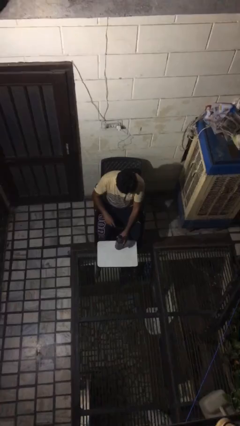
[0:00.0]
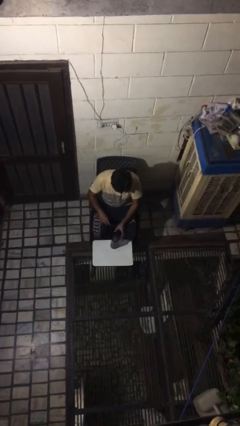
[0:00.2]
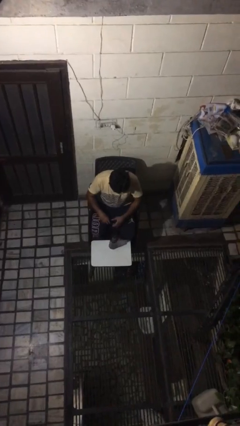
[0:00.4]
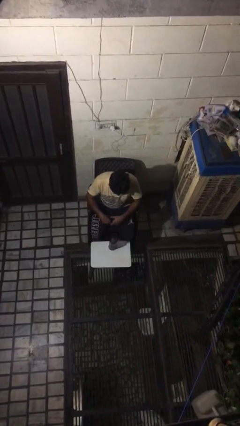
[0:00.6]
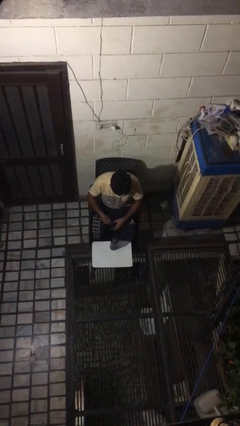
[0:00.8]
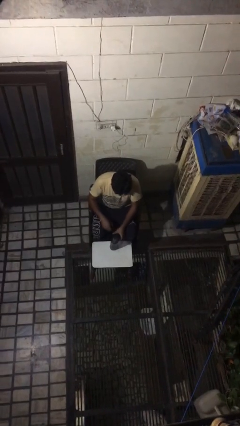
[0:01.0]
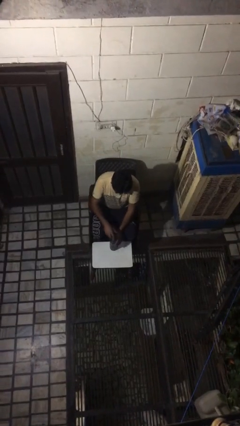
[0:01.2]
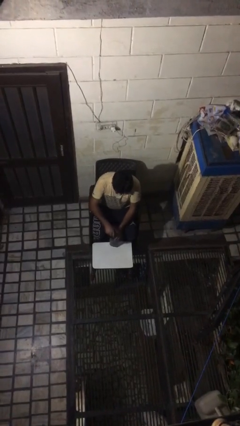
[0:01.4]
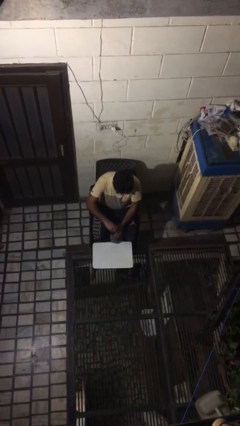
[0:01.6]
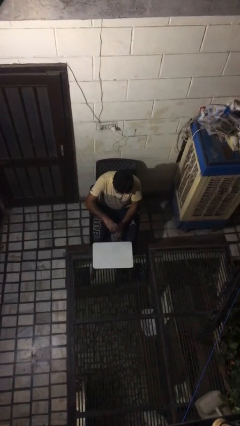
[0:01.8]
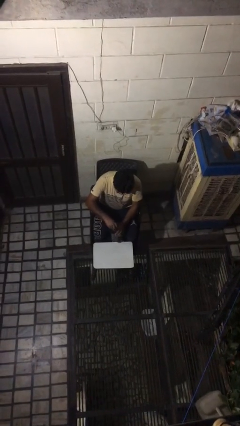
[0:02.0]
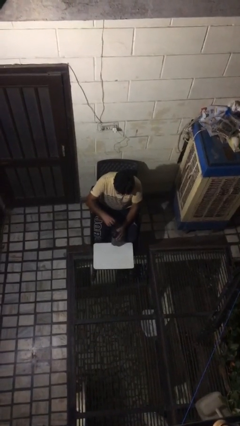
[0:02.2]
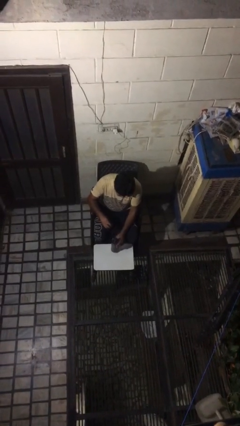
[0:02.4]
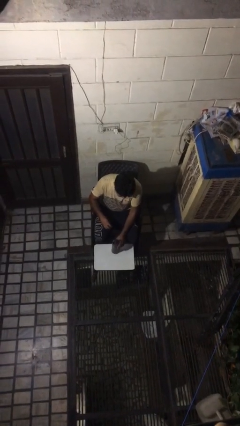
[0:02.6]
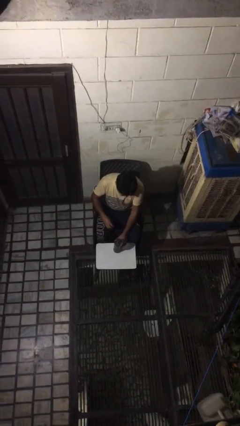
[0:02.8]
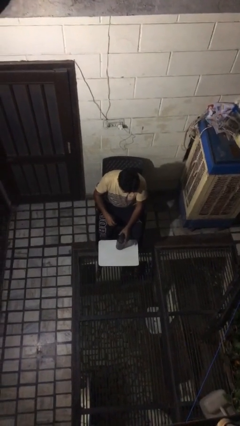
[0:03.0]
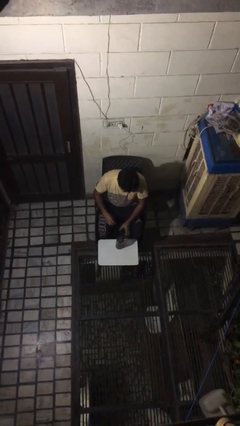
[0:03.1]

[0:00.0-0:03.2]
person unscrews lid from bottle

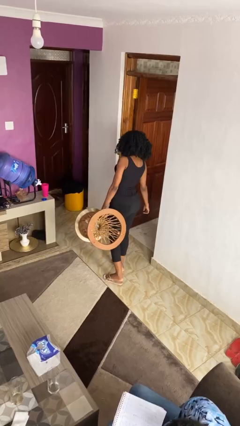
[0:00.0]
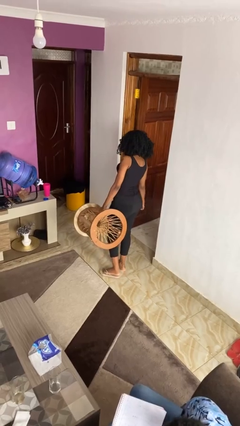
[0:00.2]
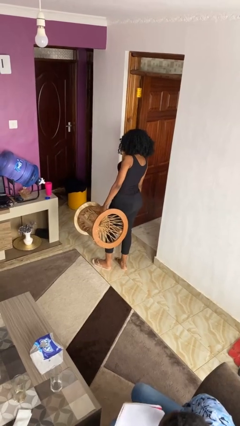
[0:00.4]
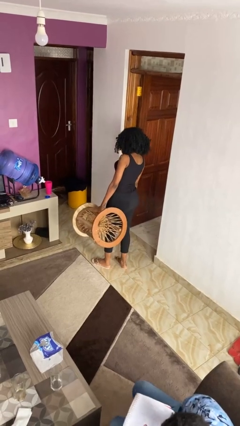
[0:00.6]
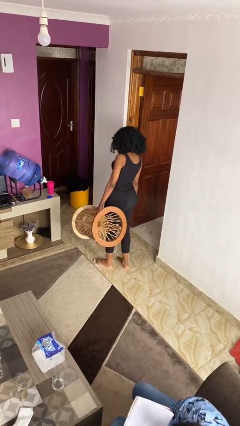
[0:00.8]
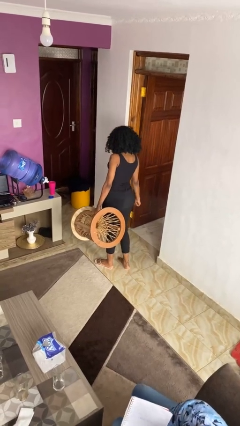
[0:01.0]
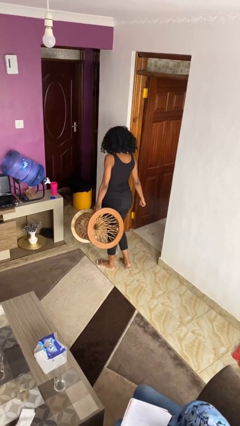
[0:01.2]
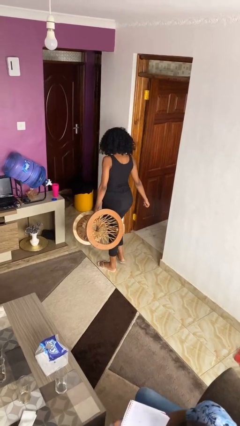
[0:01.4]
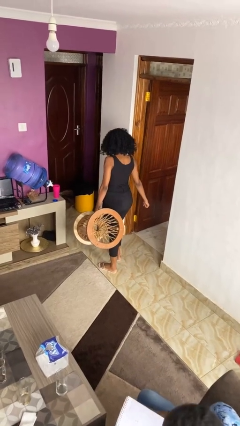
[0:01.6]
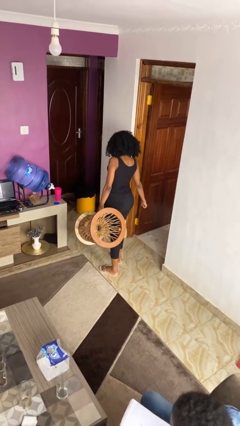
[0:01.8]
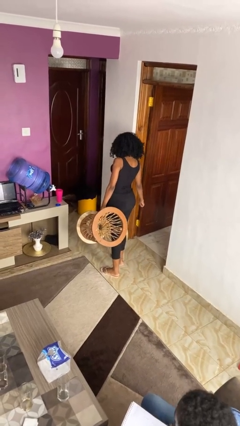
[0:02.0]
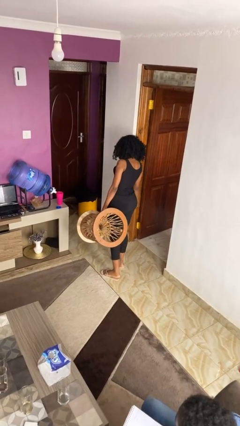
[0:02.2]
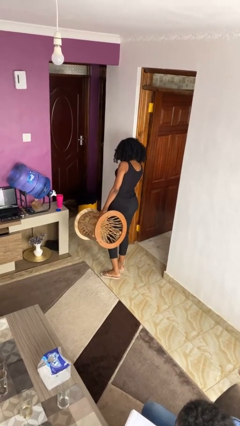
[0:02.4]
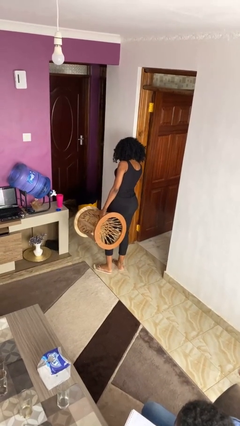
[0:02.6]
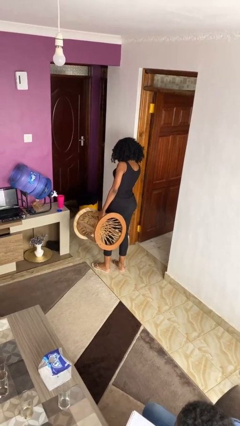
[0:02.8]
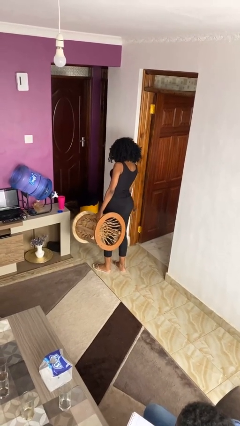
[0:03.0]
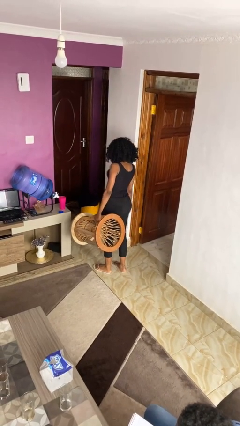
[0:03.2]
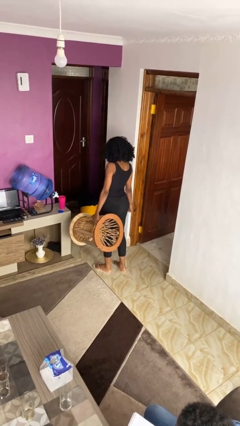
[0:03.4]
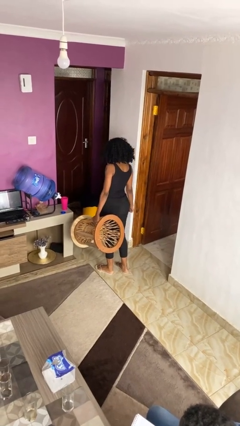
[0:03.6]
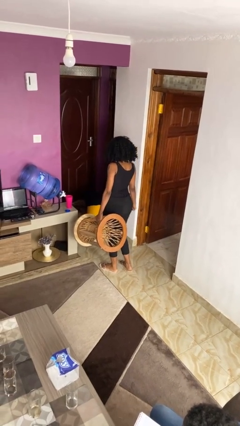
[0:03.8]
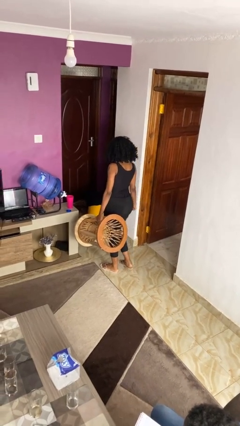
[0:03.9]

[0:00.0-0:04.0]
person carries furniture

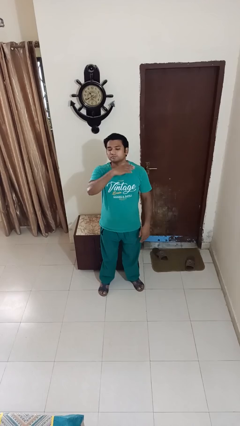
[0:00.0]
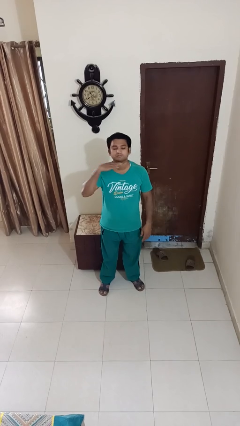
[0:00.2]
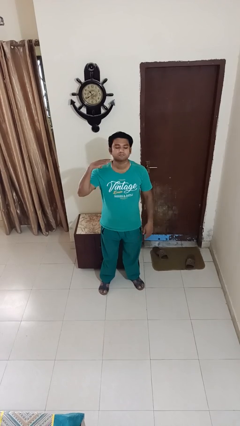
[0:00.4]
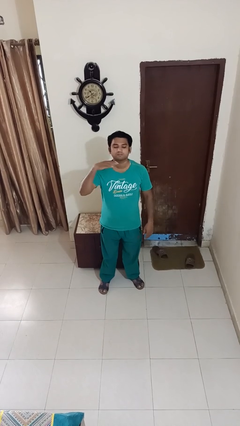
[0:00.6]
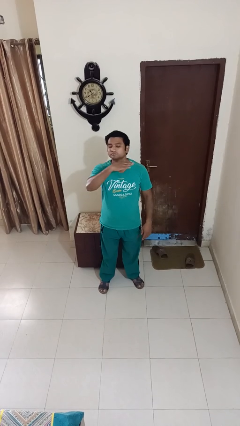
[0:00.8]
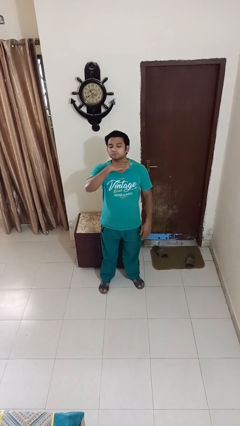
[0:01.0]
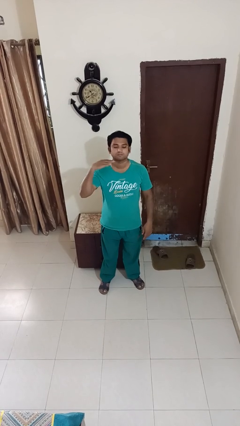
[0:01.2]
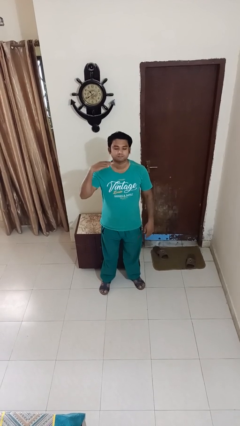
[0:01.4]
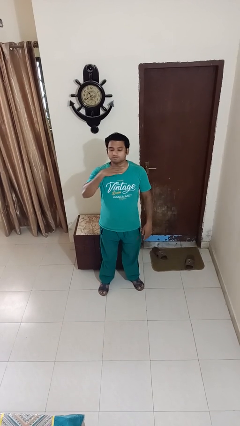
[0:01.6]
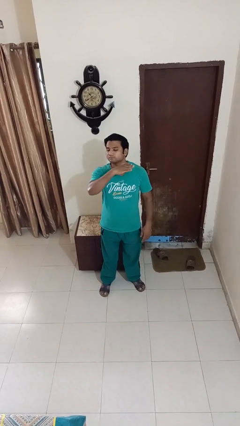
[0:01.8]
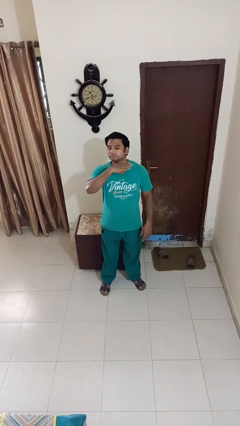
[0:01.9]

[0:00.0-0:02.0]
person gestures cut

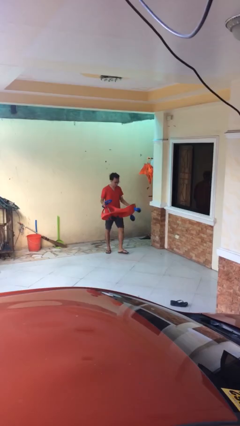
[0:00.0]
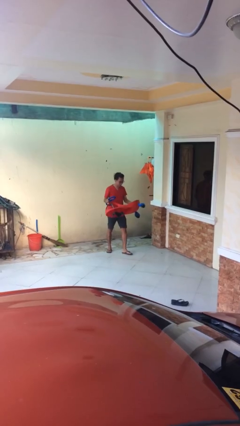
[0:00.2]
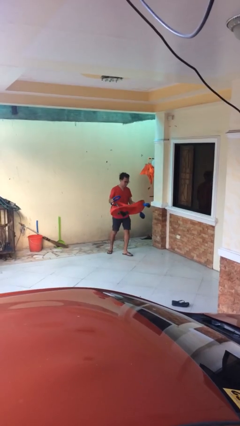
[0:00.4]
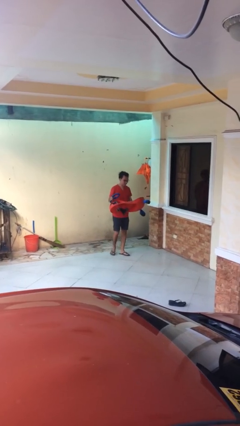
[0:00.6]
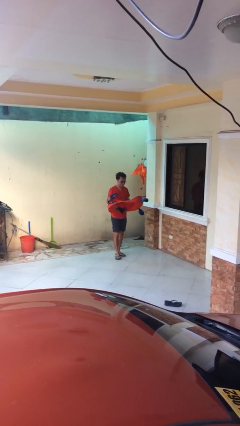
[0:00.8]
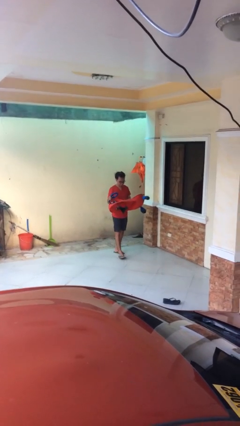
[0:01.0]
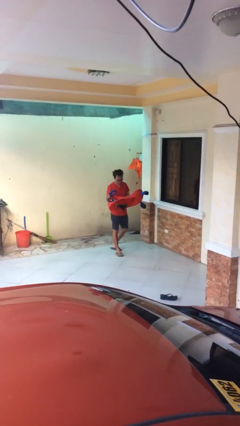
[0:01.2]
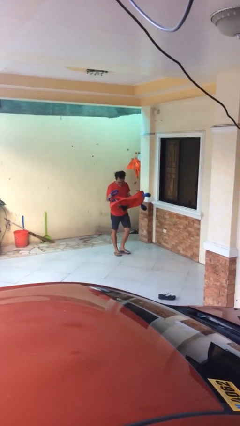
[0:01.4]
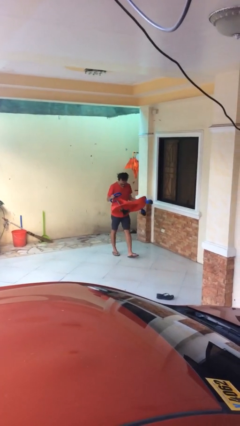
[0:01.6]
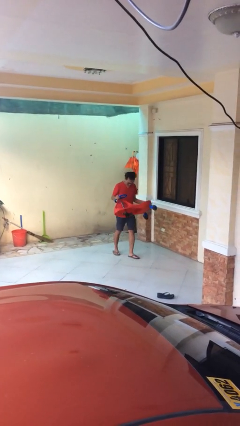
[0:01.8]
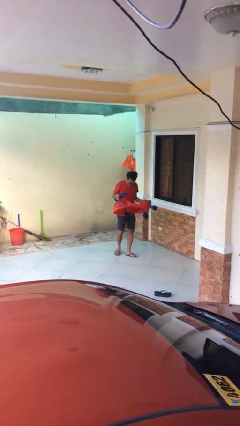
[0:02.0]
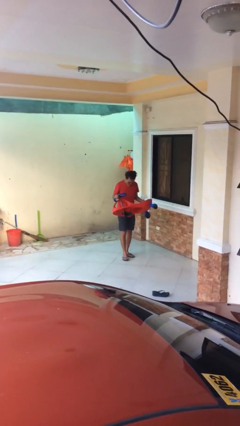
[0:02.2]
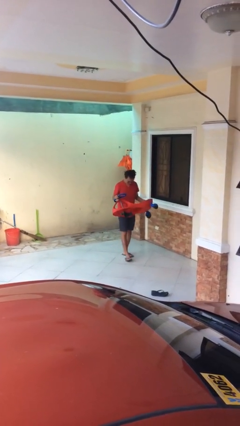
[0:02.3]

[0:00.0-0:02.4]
person carries heavy object

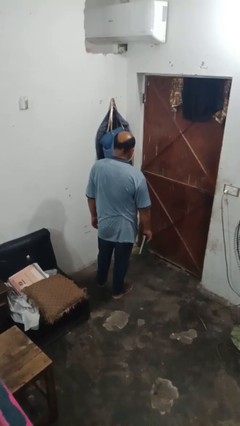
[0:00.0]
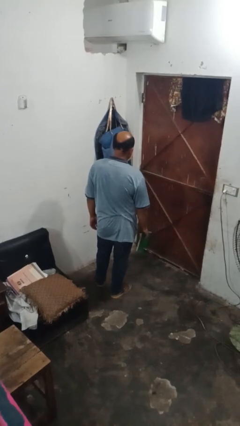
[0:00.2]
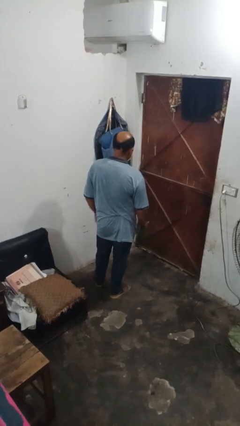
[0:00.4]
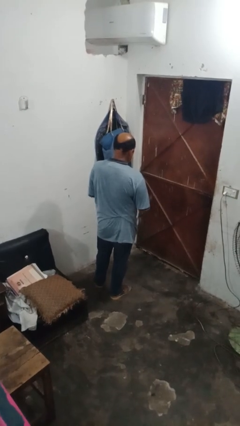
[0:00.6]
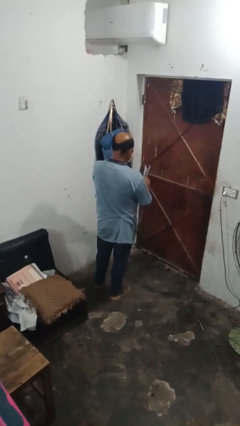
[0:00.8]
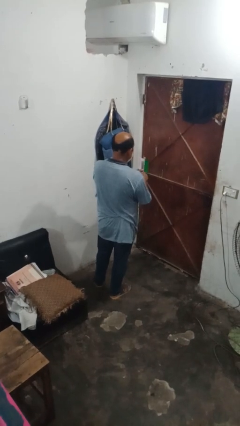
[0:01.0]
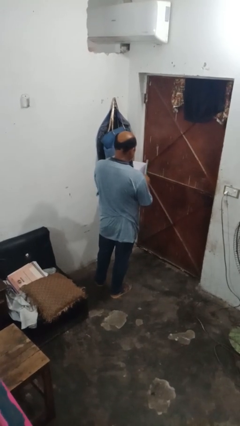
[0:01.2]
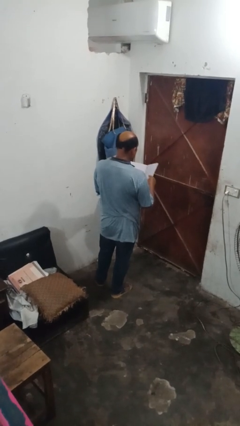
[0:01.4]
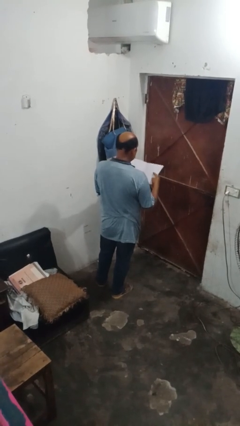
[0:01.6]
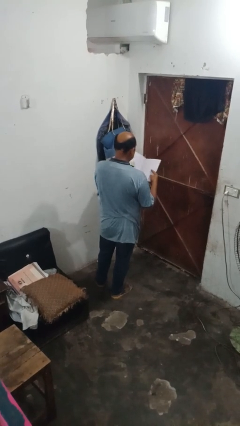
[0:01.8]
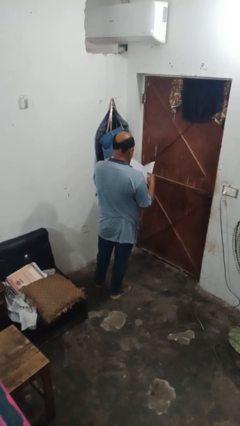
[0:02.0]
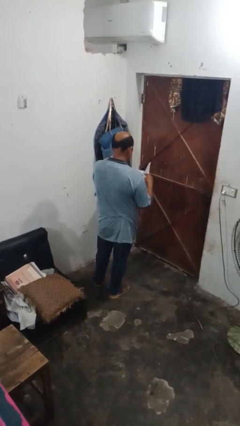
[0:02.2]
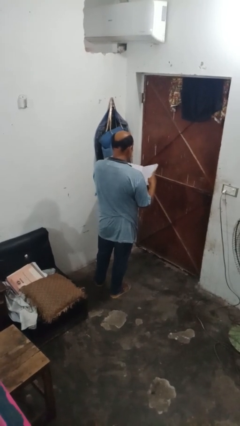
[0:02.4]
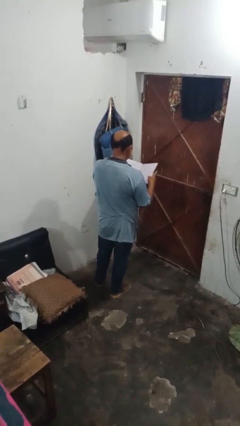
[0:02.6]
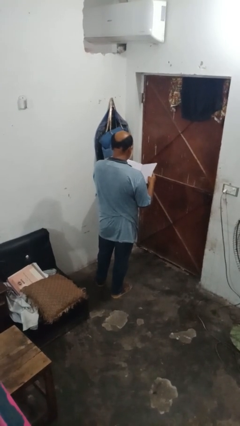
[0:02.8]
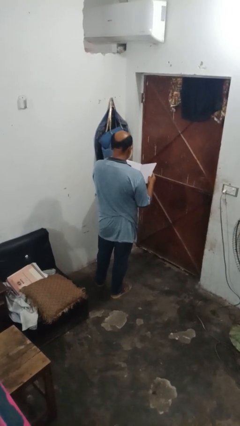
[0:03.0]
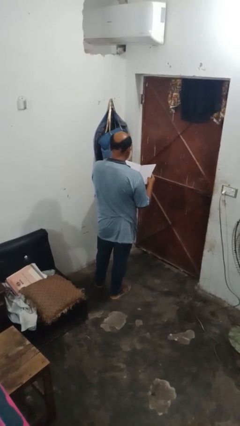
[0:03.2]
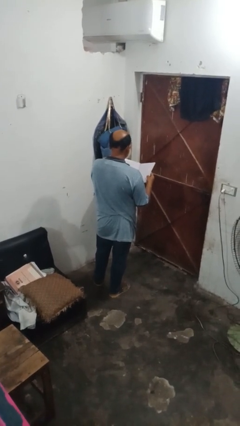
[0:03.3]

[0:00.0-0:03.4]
person reads book

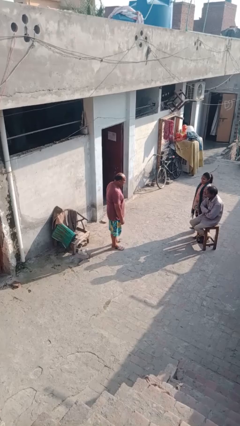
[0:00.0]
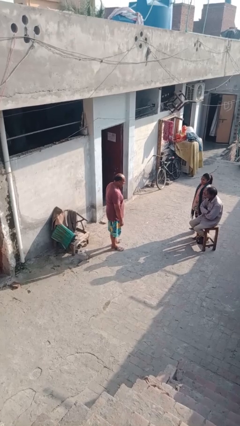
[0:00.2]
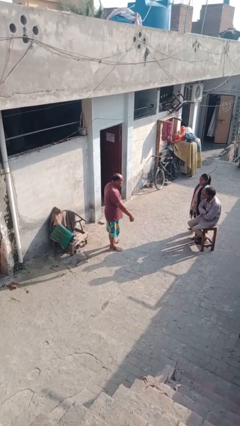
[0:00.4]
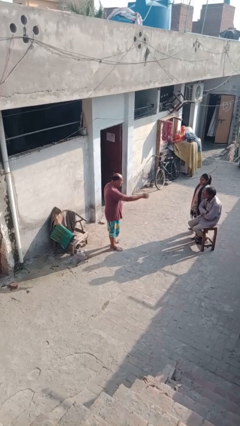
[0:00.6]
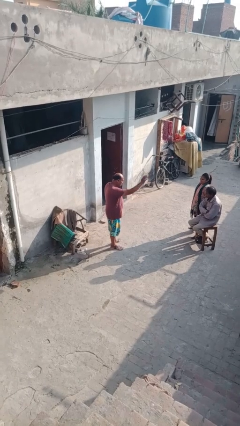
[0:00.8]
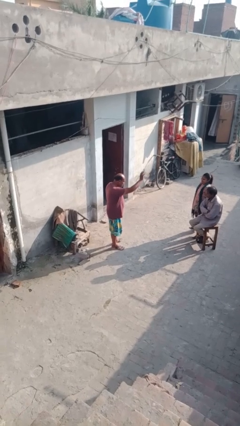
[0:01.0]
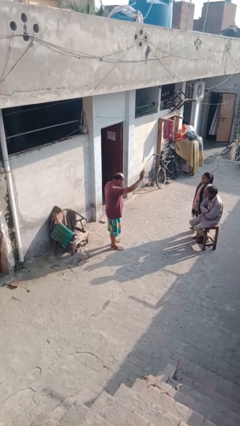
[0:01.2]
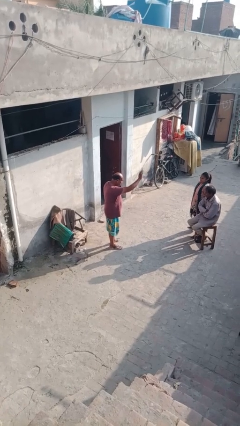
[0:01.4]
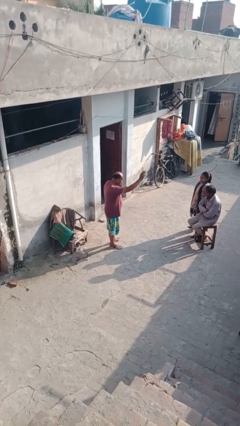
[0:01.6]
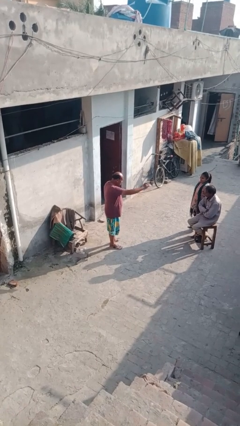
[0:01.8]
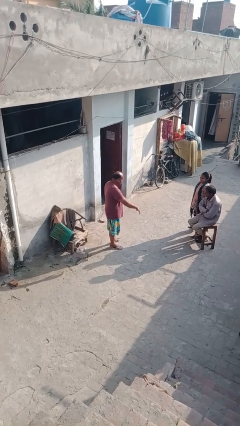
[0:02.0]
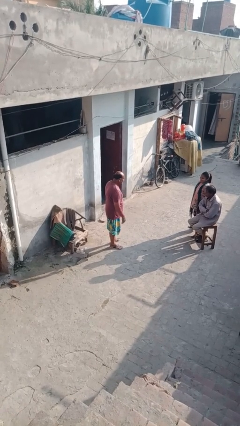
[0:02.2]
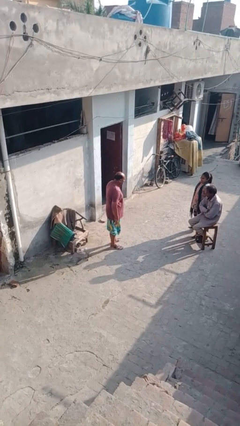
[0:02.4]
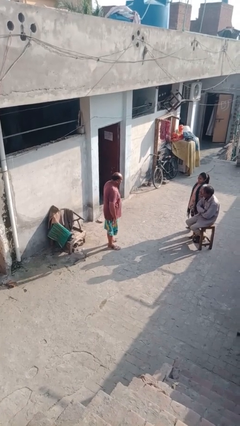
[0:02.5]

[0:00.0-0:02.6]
person waves at person
